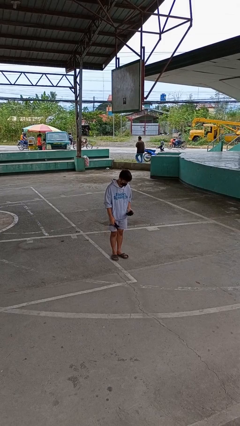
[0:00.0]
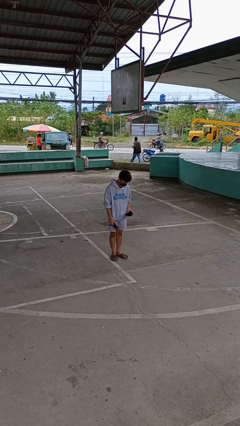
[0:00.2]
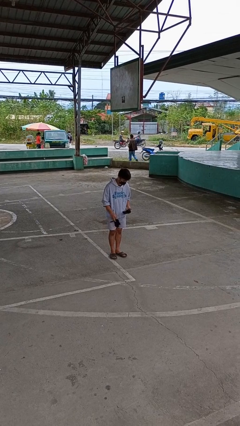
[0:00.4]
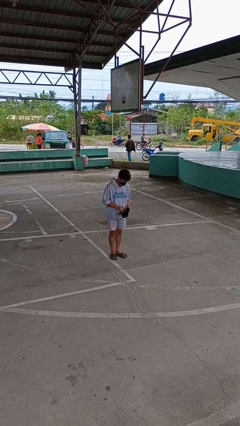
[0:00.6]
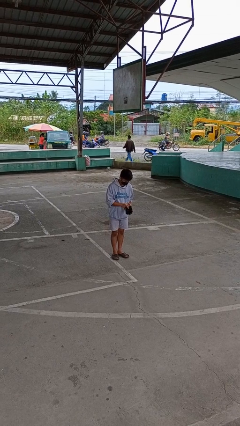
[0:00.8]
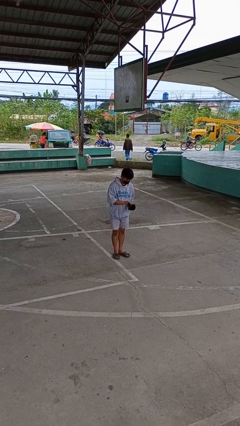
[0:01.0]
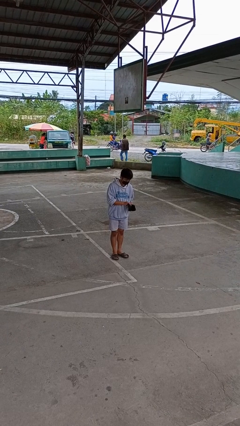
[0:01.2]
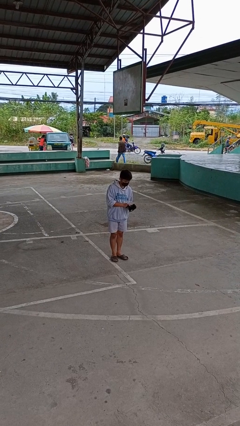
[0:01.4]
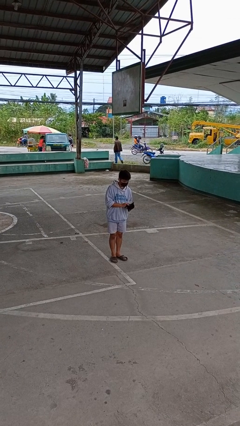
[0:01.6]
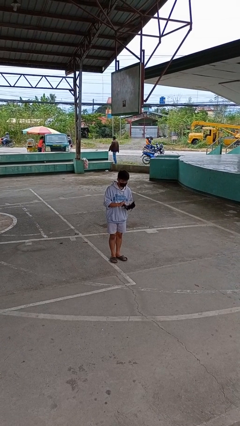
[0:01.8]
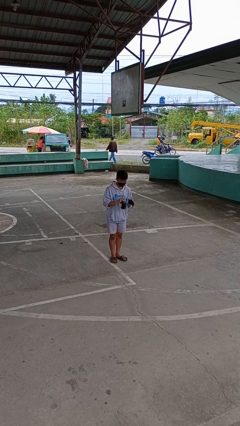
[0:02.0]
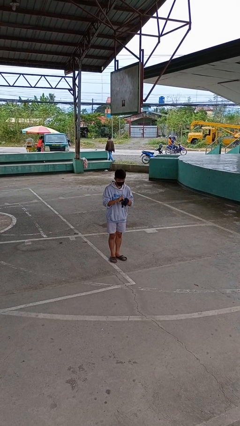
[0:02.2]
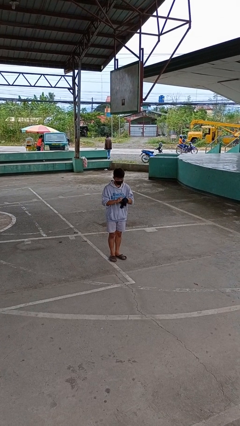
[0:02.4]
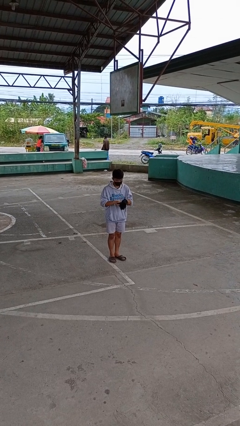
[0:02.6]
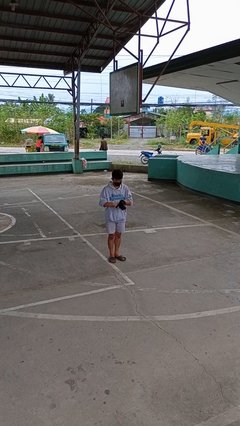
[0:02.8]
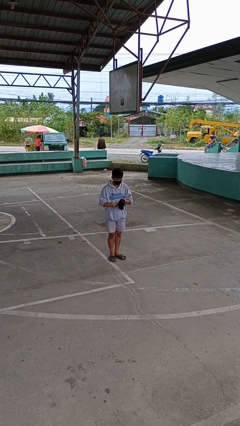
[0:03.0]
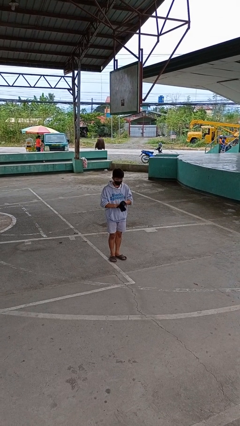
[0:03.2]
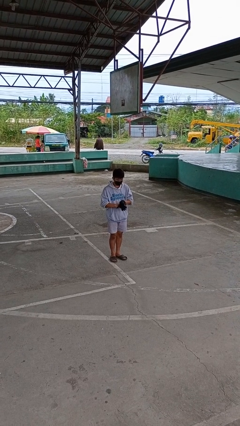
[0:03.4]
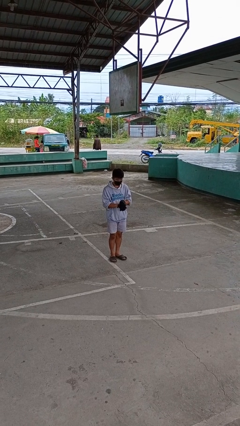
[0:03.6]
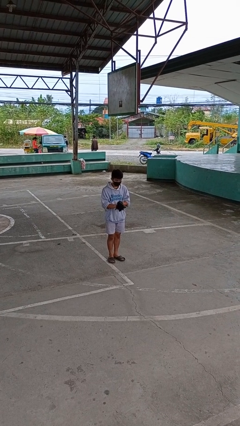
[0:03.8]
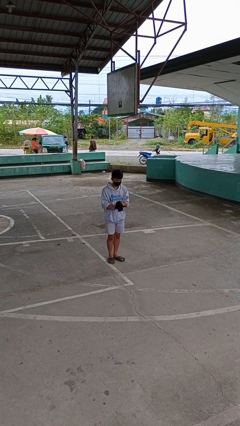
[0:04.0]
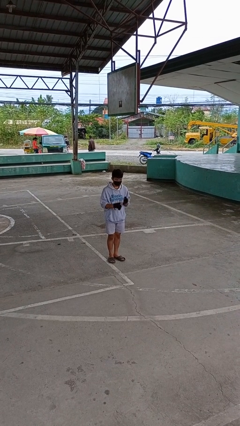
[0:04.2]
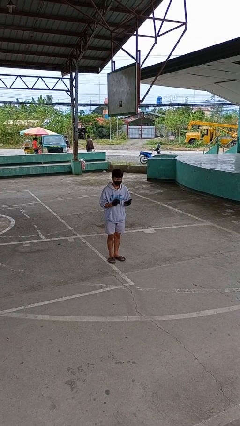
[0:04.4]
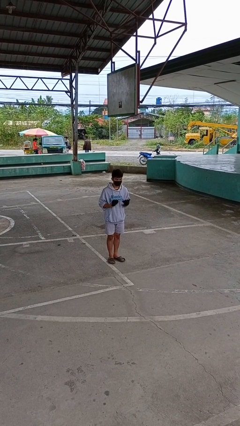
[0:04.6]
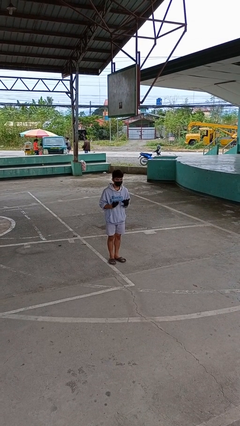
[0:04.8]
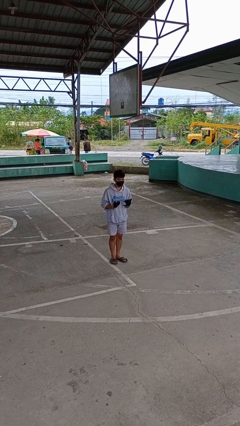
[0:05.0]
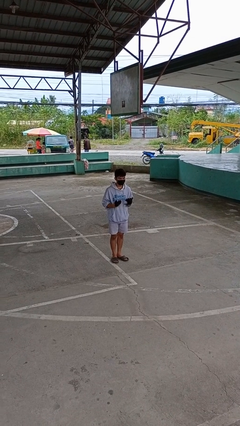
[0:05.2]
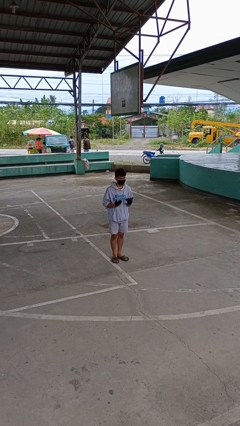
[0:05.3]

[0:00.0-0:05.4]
person puts on gloves

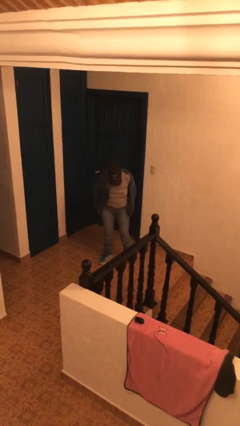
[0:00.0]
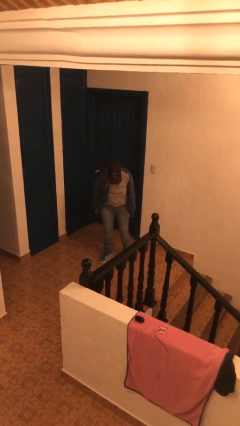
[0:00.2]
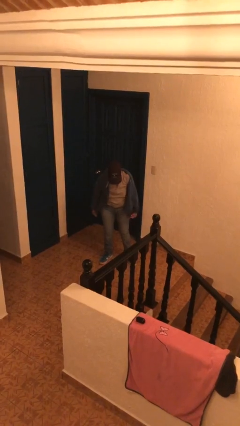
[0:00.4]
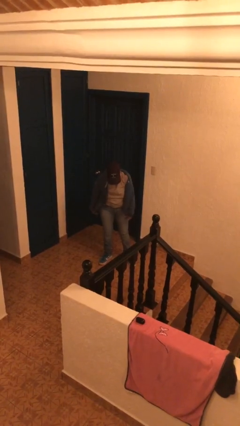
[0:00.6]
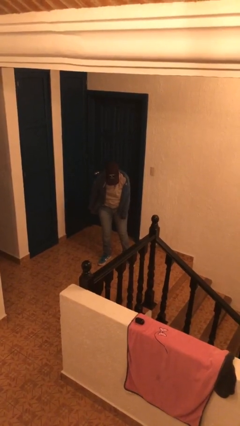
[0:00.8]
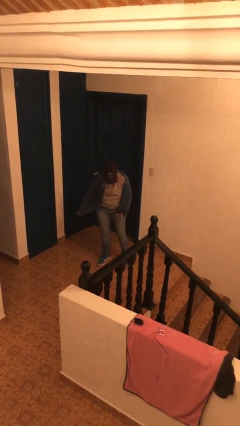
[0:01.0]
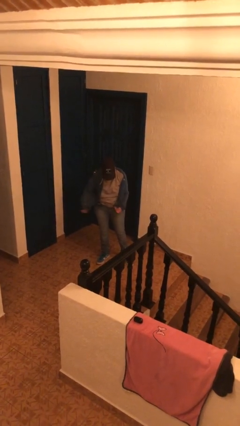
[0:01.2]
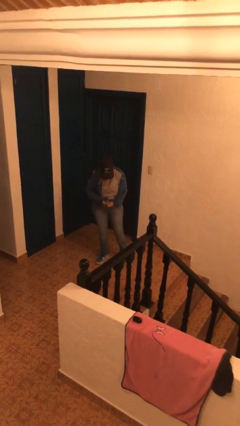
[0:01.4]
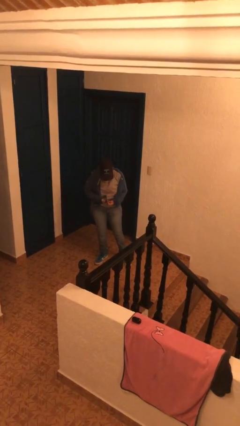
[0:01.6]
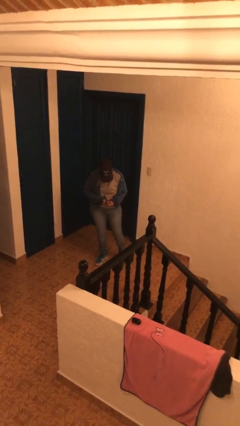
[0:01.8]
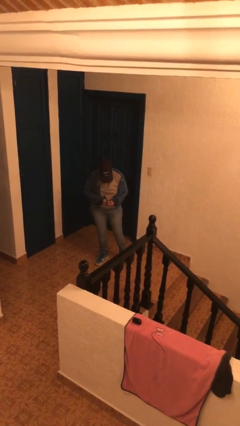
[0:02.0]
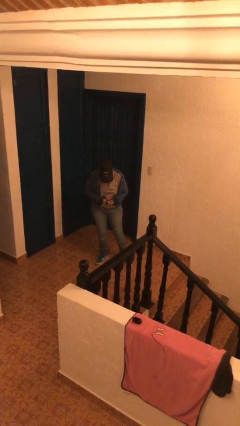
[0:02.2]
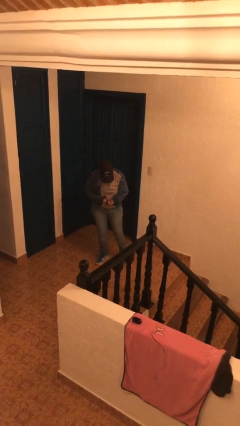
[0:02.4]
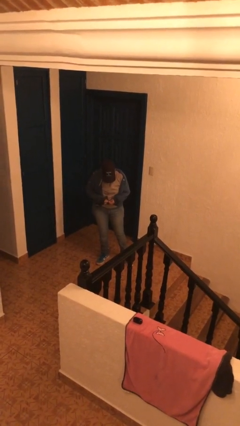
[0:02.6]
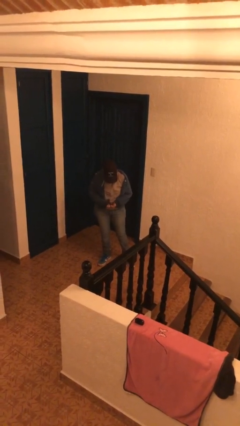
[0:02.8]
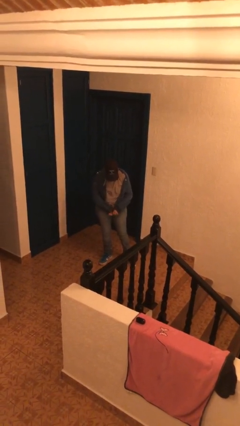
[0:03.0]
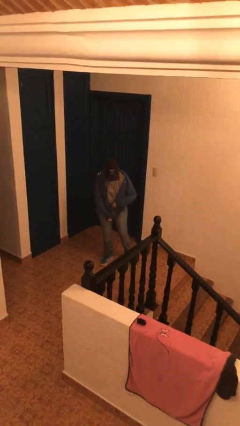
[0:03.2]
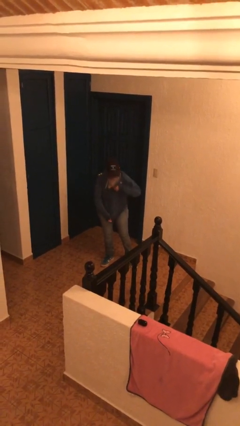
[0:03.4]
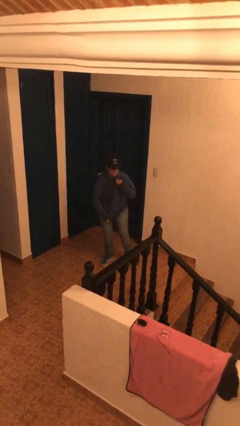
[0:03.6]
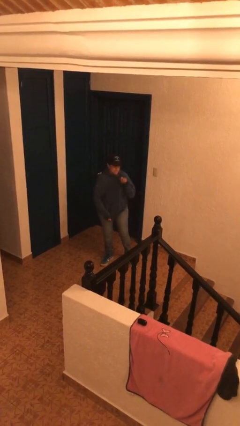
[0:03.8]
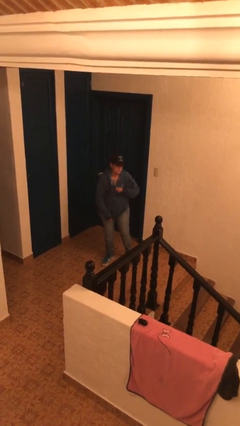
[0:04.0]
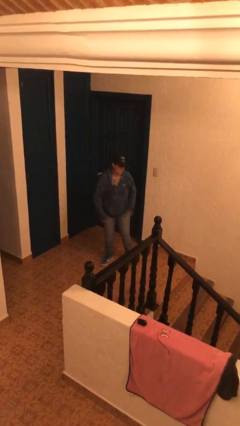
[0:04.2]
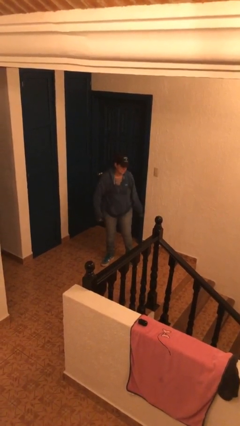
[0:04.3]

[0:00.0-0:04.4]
person zips up jacket

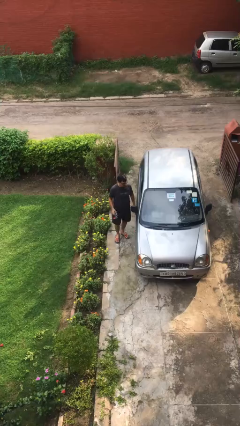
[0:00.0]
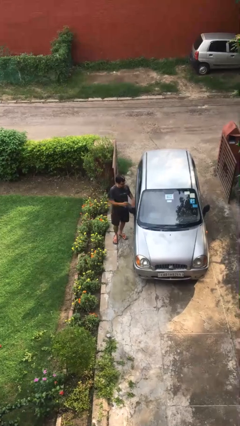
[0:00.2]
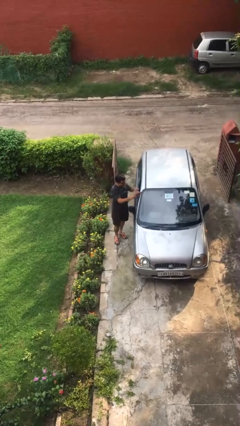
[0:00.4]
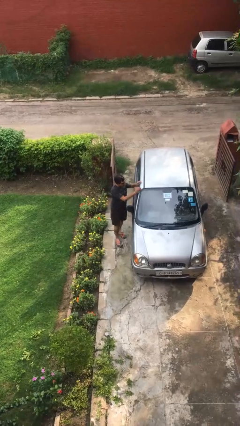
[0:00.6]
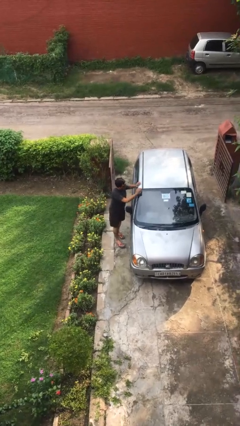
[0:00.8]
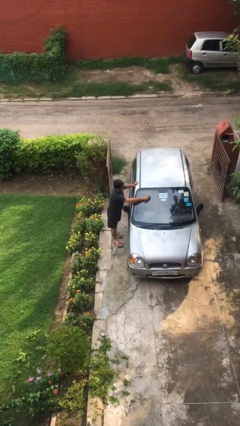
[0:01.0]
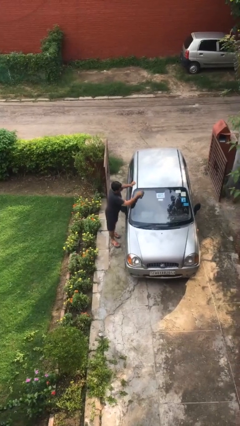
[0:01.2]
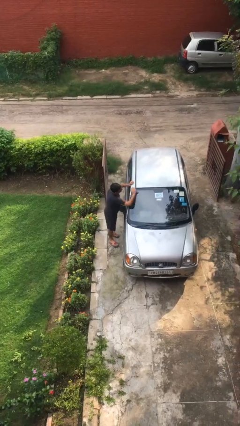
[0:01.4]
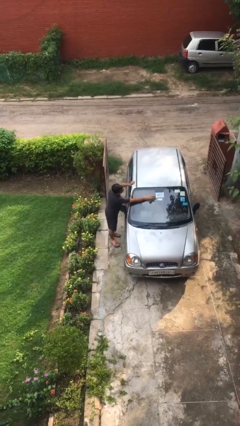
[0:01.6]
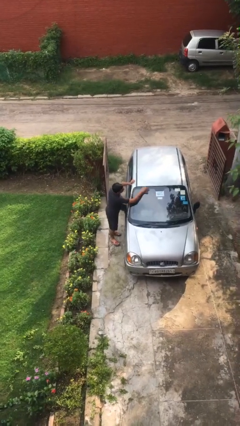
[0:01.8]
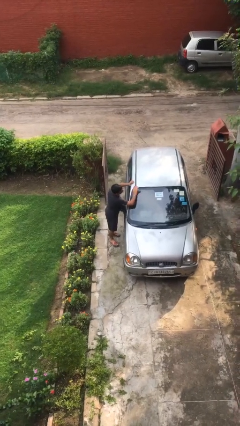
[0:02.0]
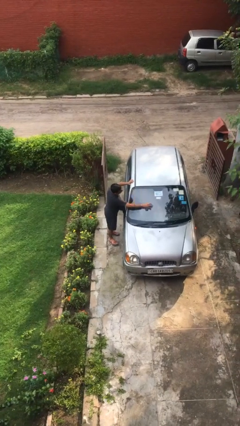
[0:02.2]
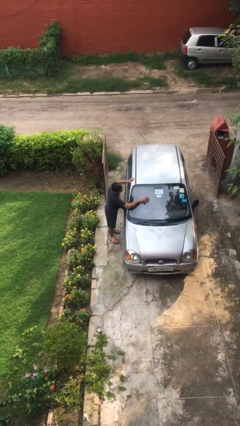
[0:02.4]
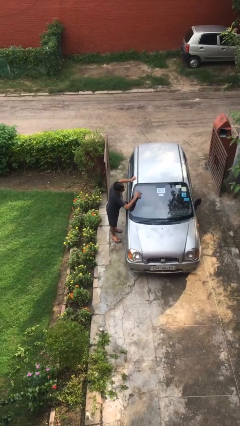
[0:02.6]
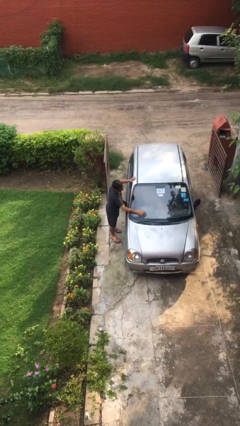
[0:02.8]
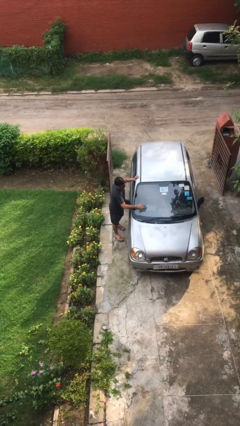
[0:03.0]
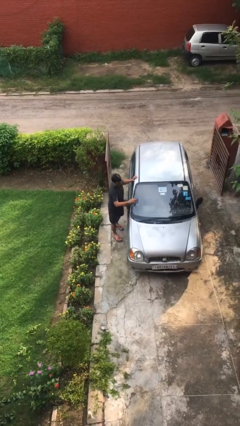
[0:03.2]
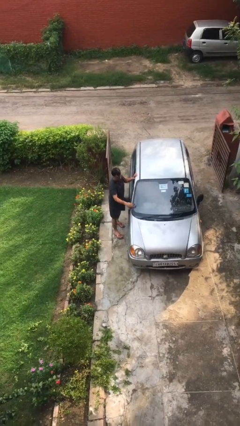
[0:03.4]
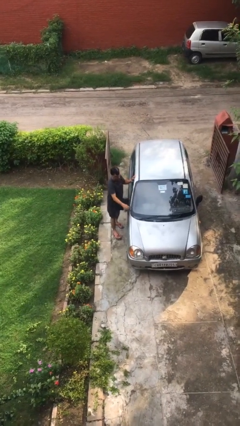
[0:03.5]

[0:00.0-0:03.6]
person polishes car with rag

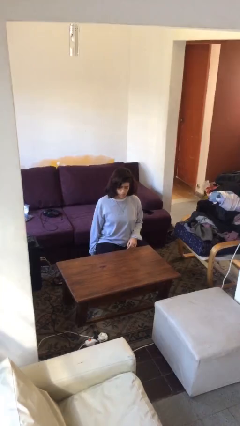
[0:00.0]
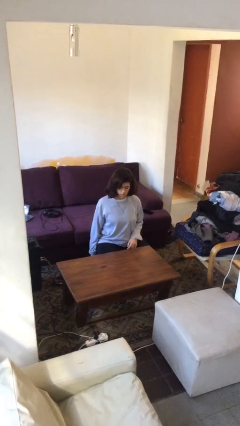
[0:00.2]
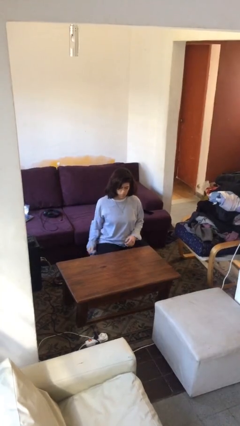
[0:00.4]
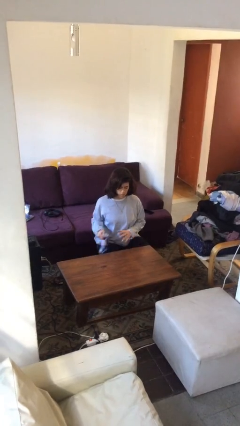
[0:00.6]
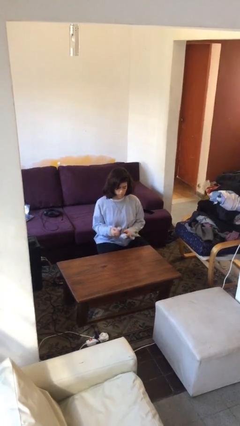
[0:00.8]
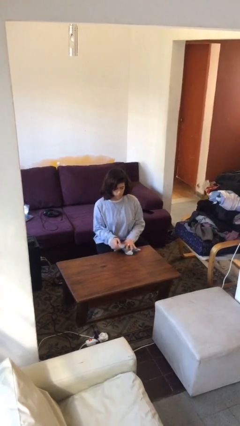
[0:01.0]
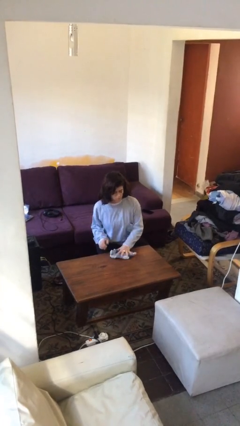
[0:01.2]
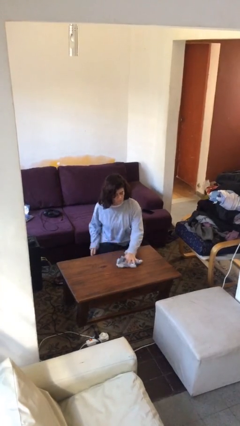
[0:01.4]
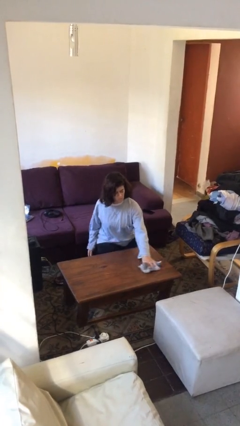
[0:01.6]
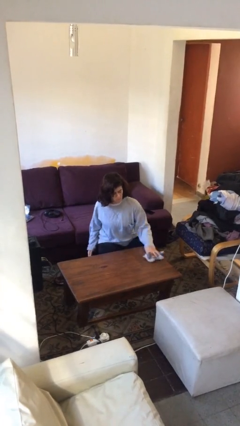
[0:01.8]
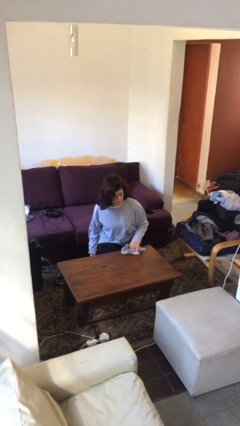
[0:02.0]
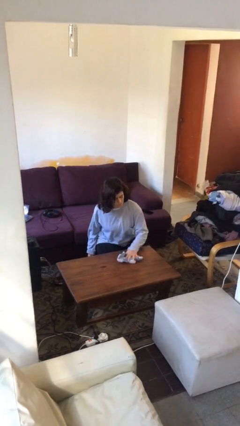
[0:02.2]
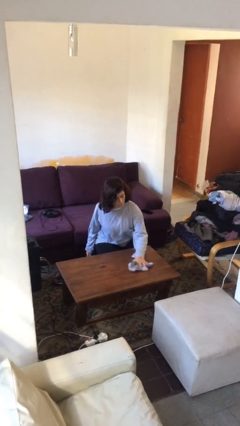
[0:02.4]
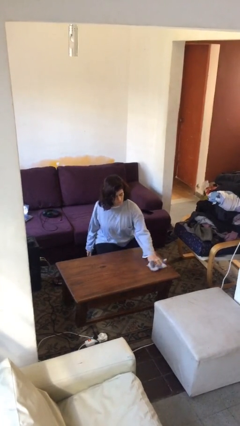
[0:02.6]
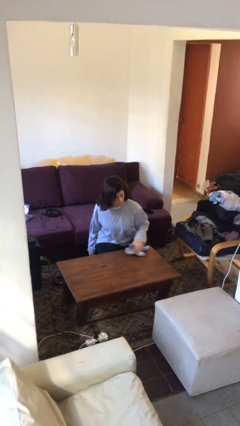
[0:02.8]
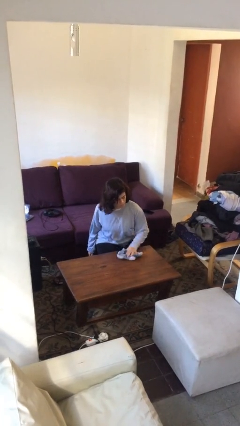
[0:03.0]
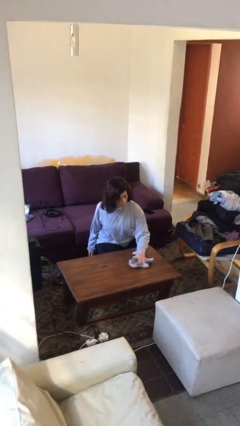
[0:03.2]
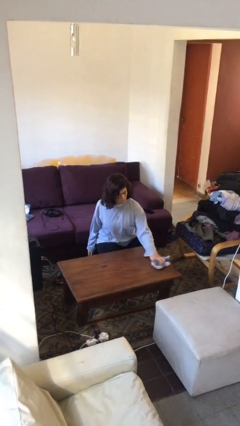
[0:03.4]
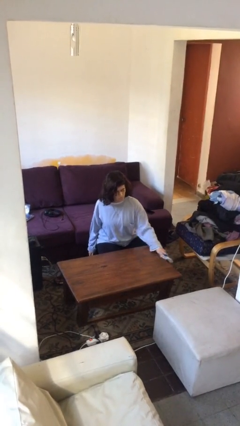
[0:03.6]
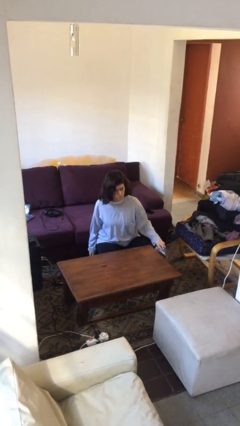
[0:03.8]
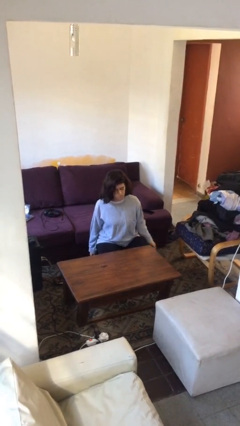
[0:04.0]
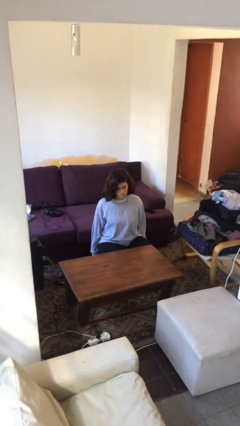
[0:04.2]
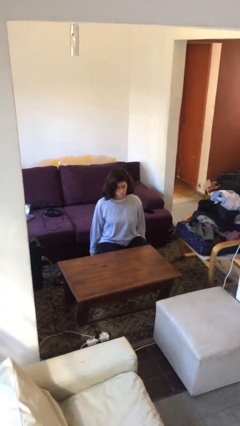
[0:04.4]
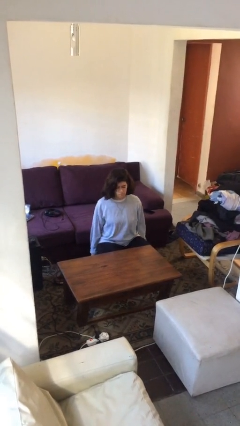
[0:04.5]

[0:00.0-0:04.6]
person cleans table with rag
